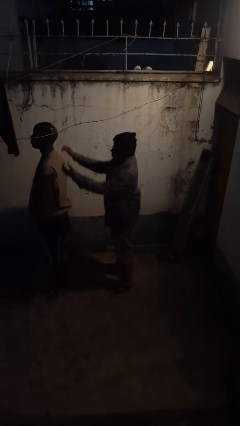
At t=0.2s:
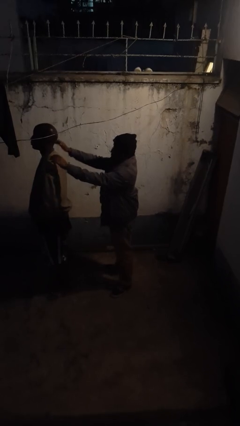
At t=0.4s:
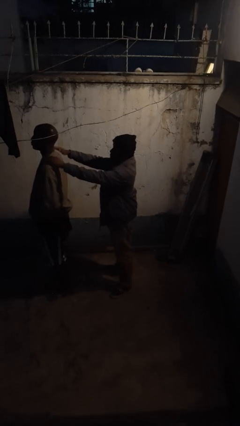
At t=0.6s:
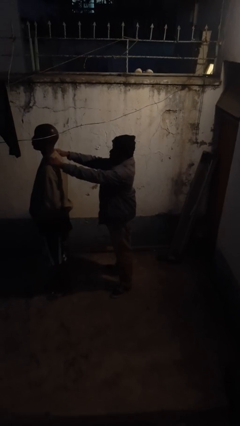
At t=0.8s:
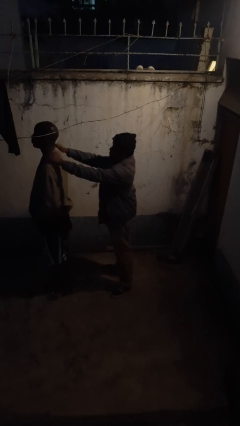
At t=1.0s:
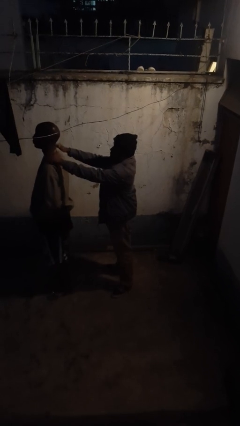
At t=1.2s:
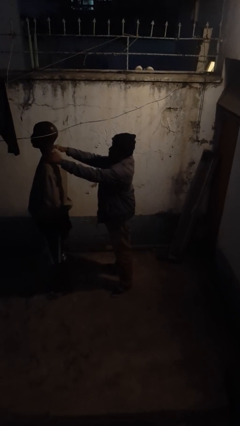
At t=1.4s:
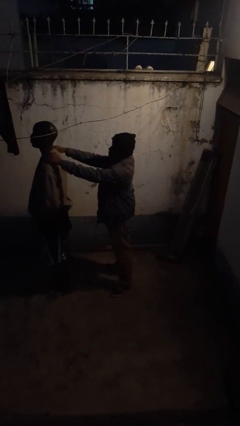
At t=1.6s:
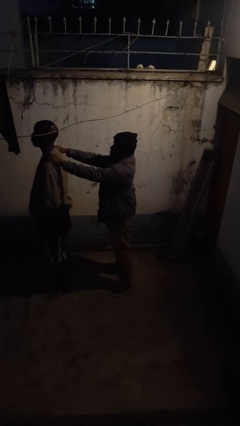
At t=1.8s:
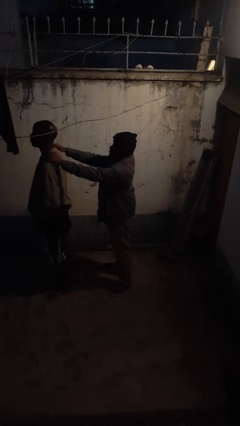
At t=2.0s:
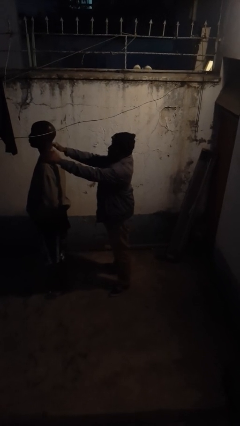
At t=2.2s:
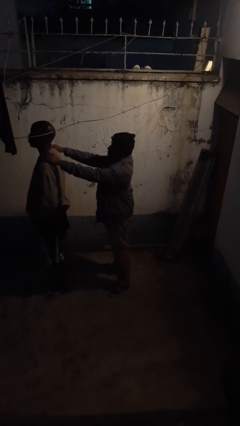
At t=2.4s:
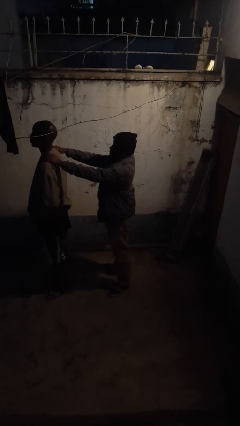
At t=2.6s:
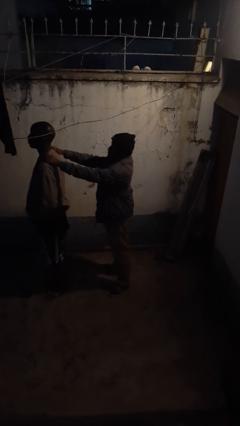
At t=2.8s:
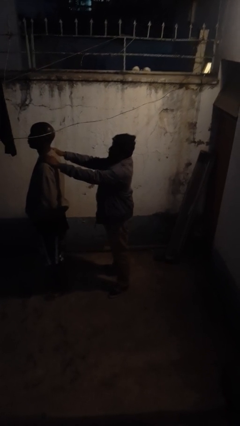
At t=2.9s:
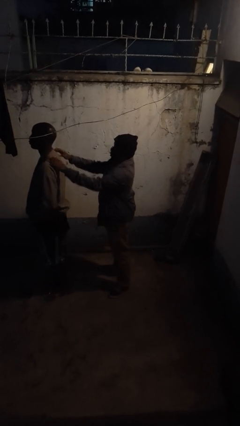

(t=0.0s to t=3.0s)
person pounds shoulders of person

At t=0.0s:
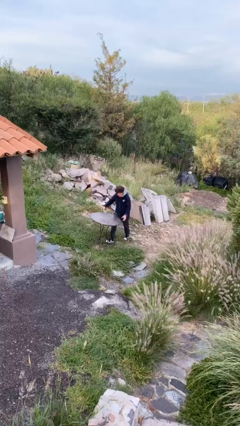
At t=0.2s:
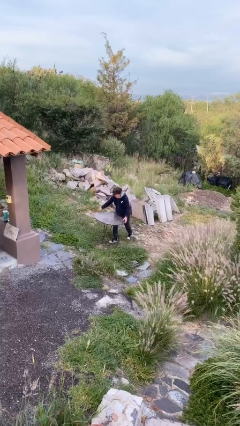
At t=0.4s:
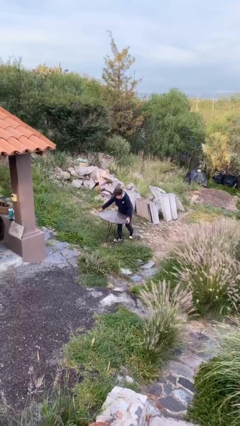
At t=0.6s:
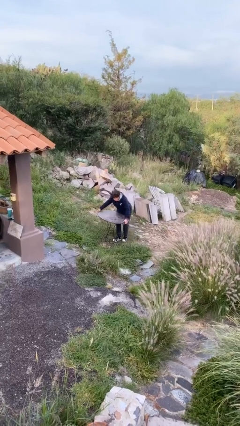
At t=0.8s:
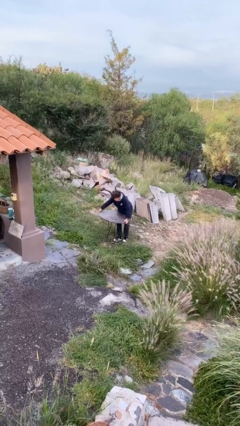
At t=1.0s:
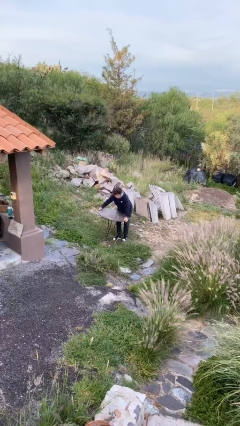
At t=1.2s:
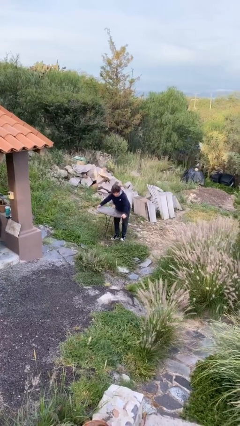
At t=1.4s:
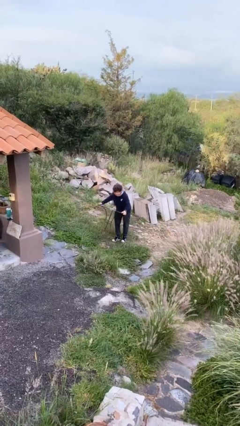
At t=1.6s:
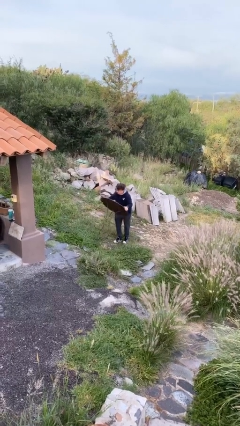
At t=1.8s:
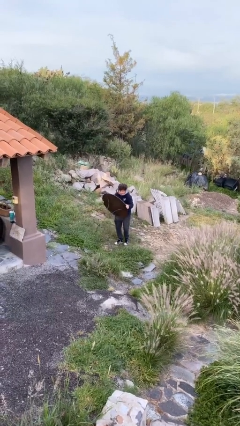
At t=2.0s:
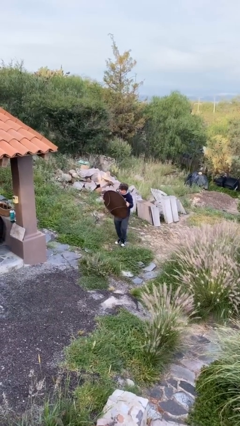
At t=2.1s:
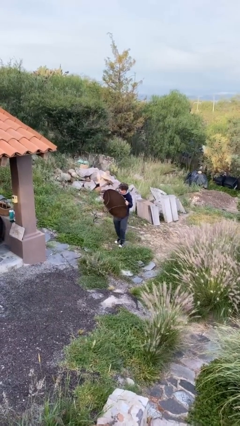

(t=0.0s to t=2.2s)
person picks up object from floor

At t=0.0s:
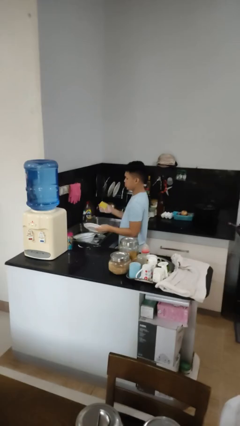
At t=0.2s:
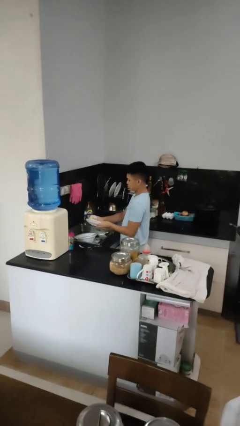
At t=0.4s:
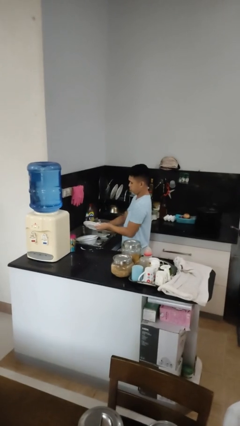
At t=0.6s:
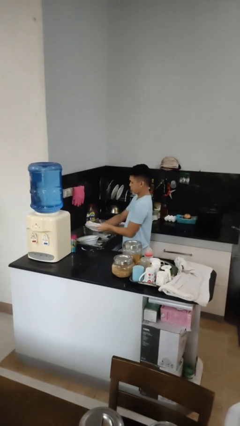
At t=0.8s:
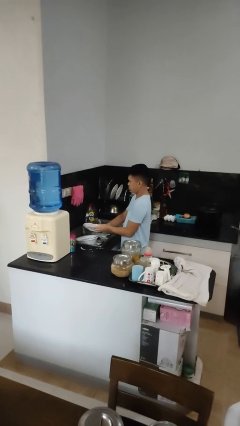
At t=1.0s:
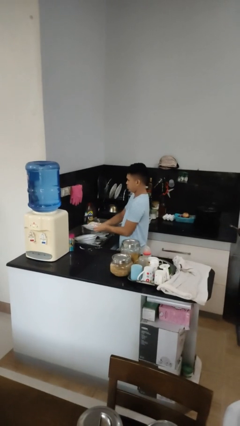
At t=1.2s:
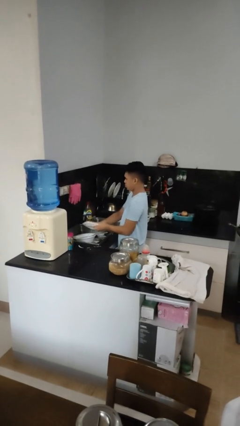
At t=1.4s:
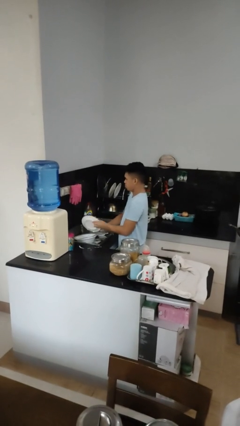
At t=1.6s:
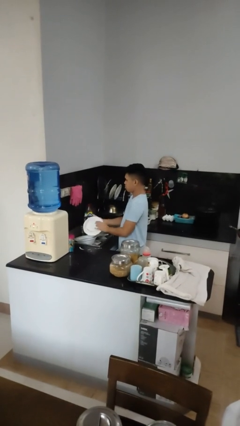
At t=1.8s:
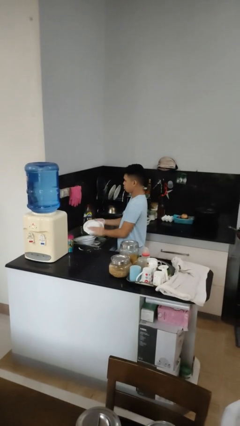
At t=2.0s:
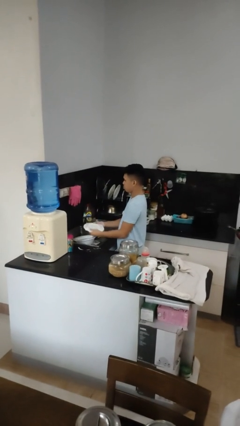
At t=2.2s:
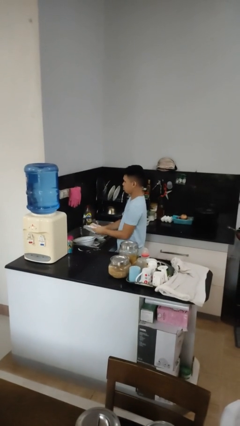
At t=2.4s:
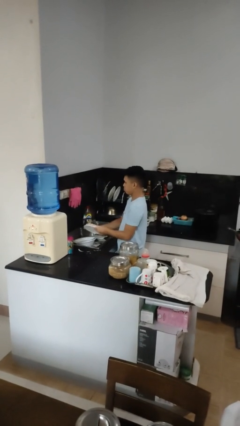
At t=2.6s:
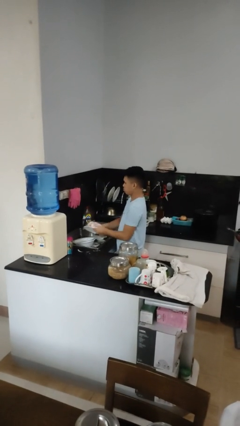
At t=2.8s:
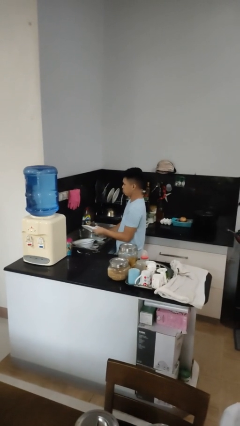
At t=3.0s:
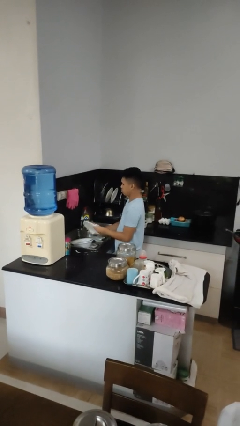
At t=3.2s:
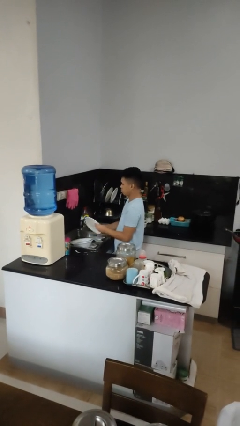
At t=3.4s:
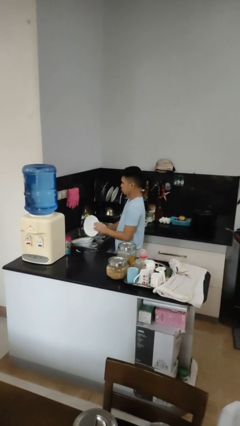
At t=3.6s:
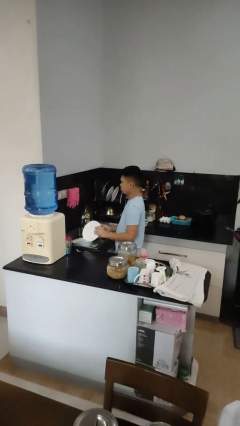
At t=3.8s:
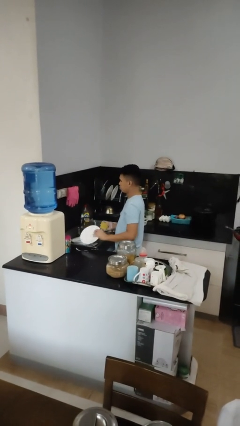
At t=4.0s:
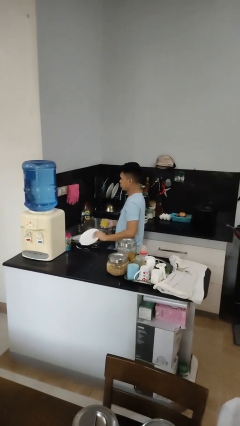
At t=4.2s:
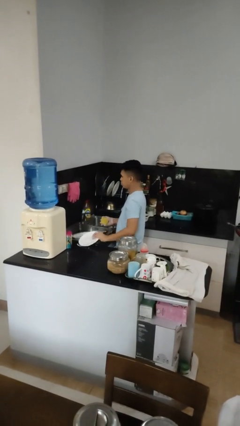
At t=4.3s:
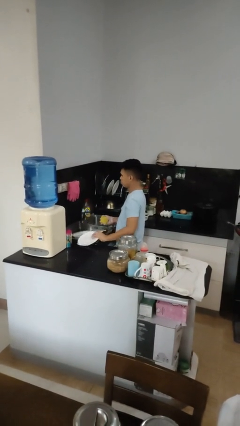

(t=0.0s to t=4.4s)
person washes dish

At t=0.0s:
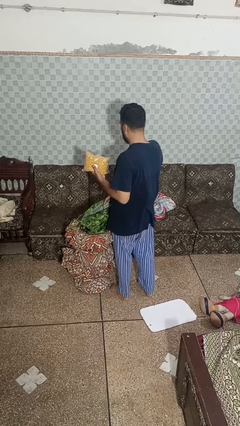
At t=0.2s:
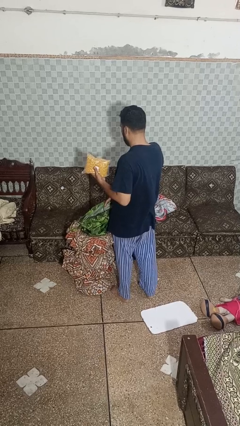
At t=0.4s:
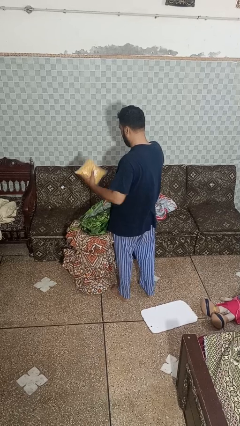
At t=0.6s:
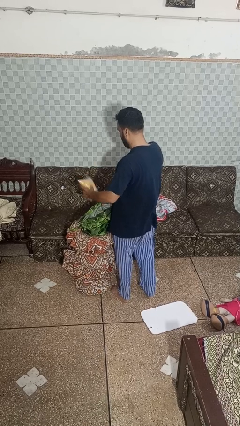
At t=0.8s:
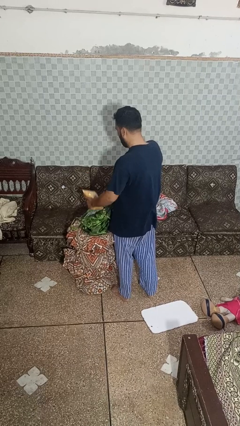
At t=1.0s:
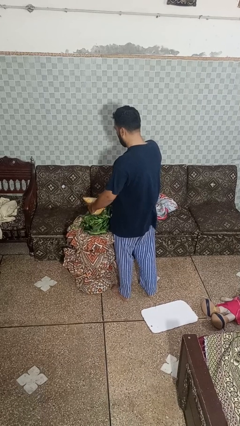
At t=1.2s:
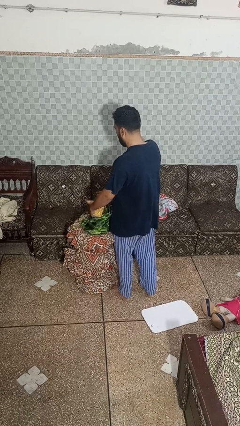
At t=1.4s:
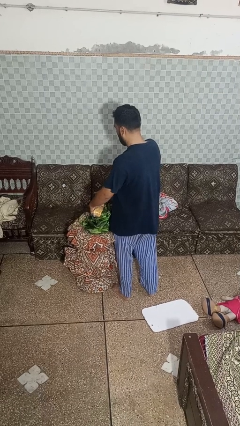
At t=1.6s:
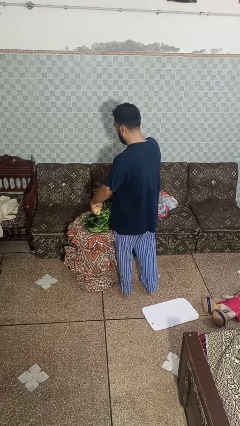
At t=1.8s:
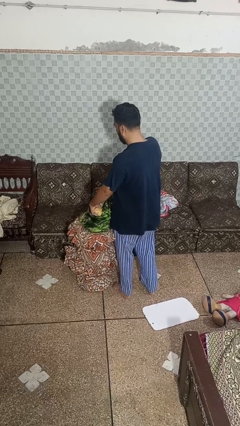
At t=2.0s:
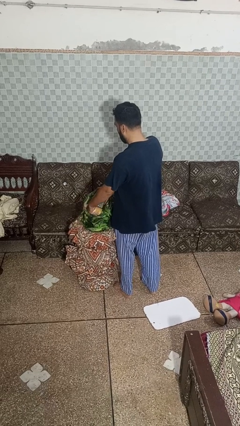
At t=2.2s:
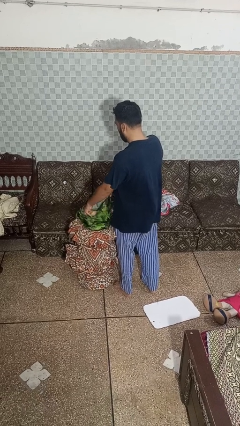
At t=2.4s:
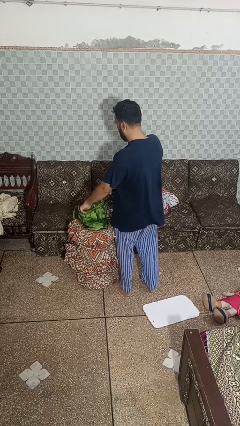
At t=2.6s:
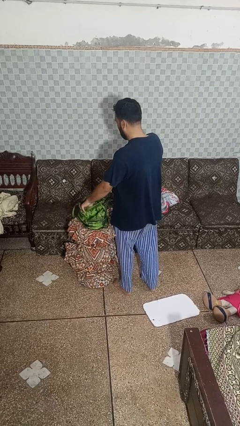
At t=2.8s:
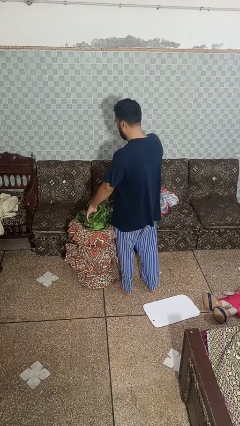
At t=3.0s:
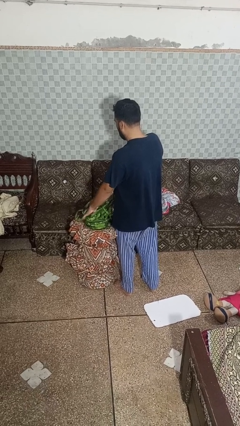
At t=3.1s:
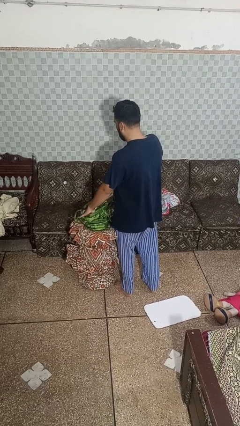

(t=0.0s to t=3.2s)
person puts object into bag

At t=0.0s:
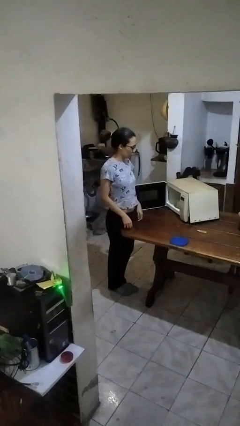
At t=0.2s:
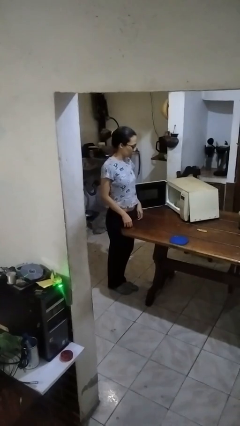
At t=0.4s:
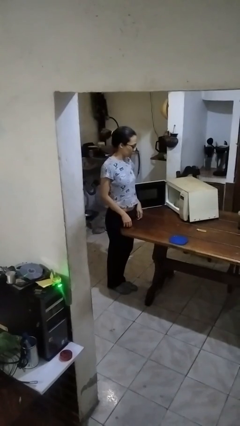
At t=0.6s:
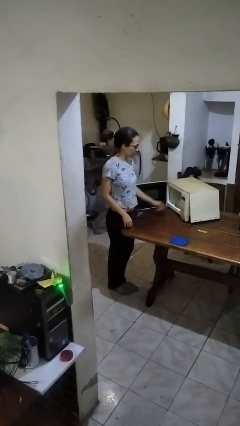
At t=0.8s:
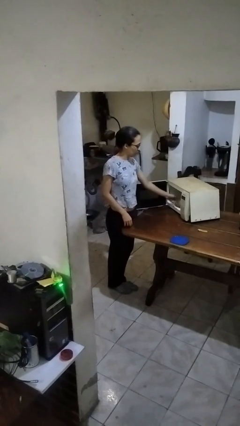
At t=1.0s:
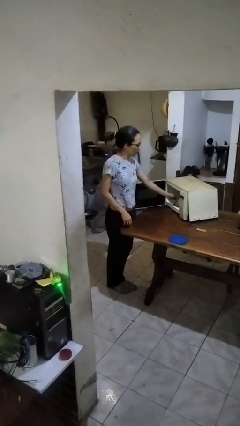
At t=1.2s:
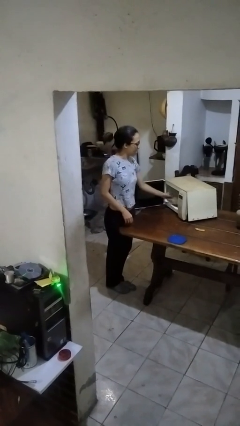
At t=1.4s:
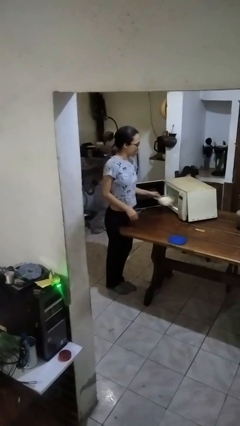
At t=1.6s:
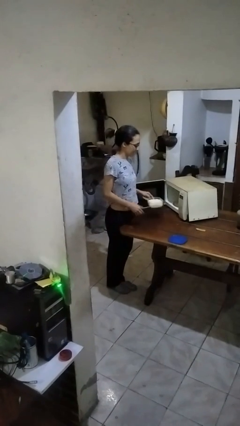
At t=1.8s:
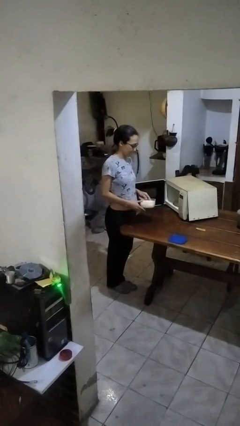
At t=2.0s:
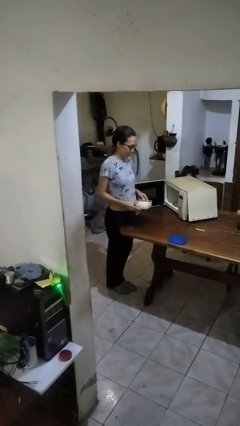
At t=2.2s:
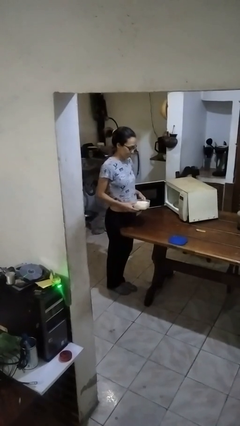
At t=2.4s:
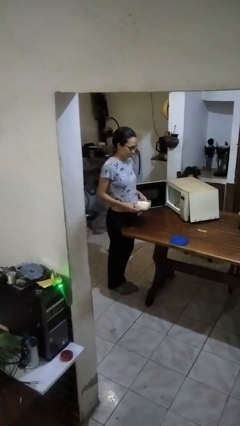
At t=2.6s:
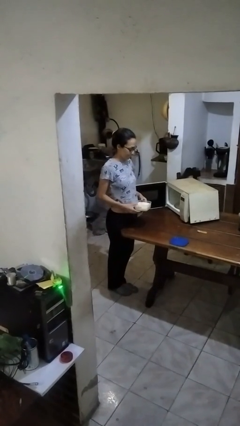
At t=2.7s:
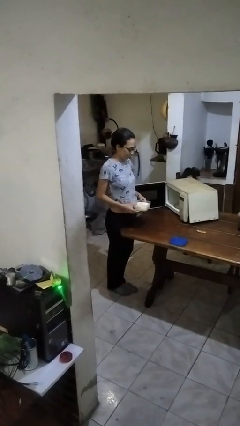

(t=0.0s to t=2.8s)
person takes object from microwave

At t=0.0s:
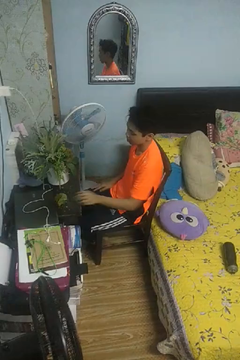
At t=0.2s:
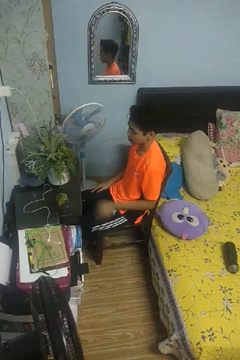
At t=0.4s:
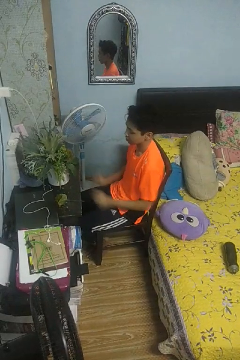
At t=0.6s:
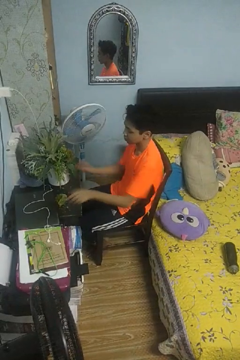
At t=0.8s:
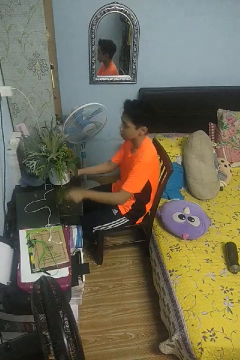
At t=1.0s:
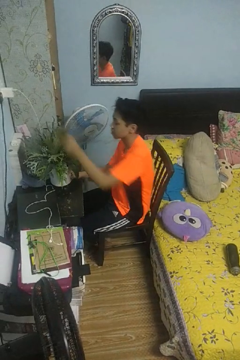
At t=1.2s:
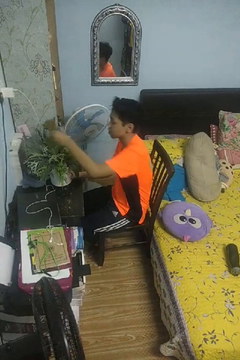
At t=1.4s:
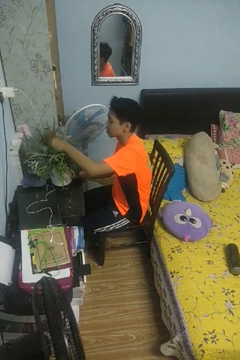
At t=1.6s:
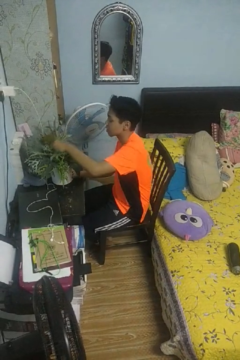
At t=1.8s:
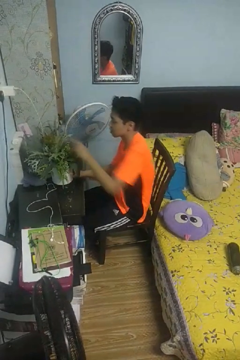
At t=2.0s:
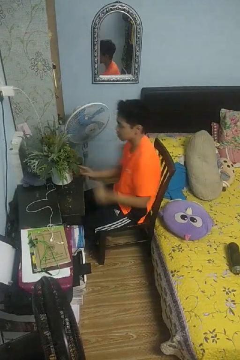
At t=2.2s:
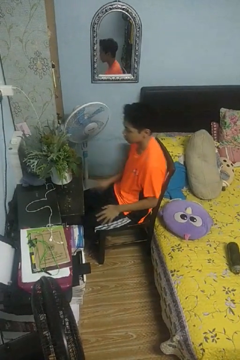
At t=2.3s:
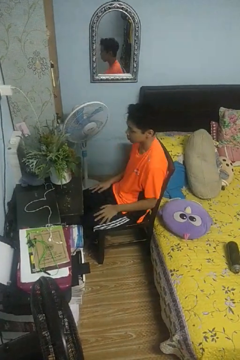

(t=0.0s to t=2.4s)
person arranges flowers in vase
